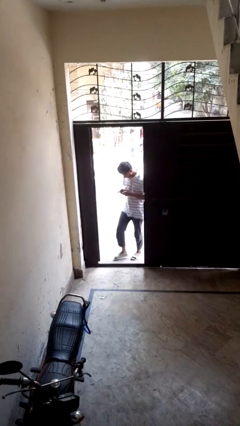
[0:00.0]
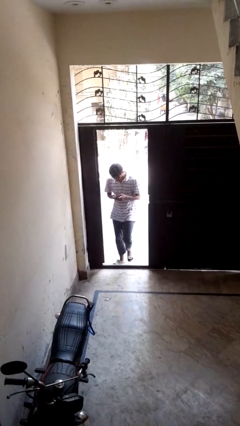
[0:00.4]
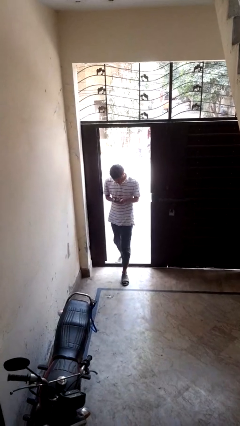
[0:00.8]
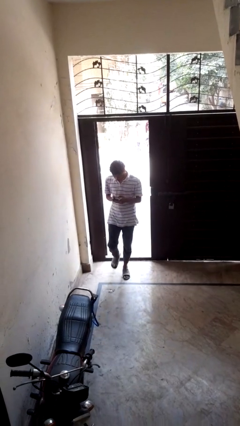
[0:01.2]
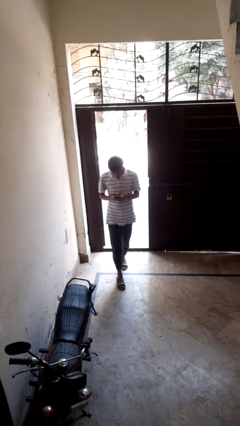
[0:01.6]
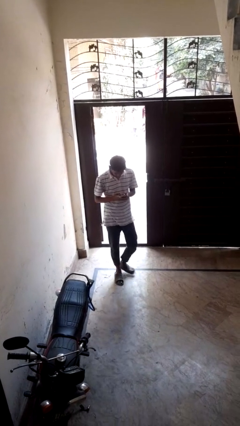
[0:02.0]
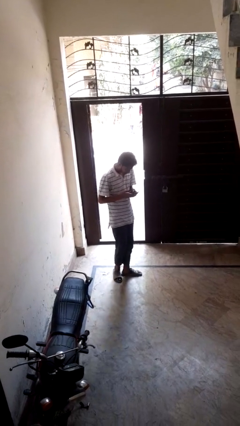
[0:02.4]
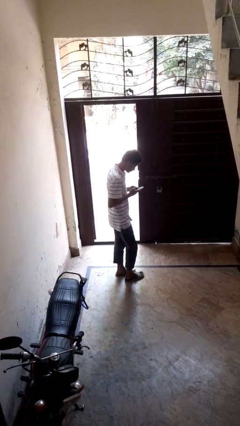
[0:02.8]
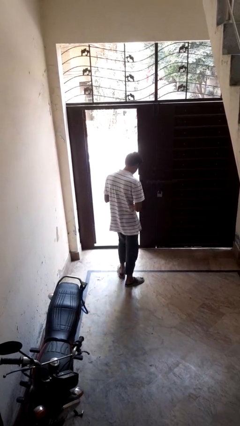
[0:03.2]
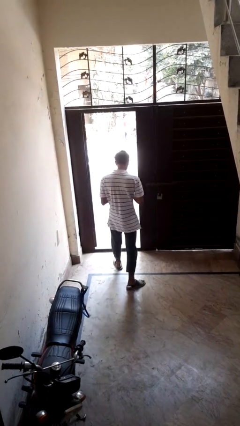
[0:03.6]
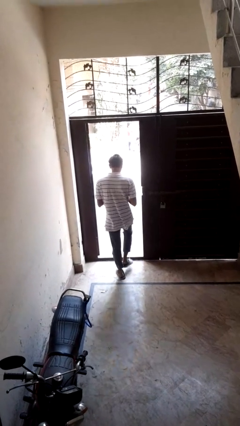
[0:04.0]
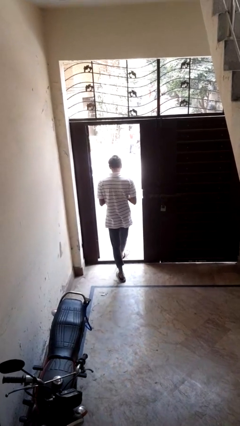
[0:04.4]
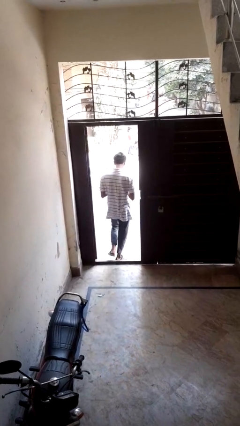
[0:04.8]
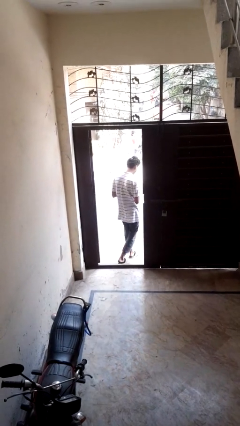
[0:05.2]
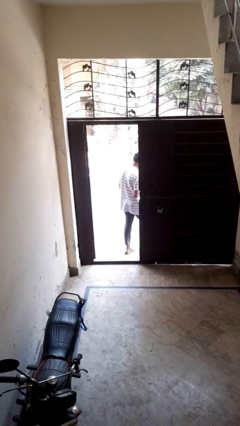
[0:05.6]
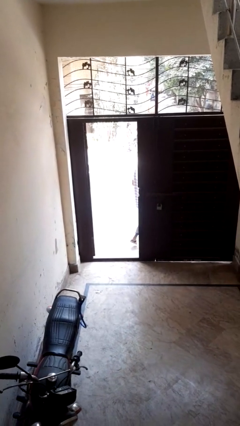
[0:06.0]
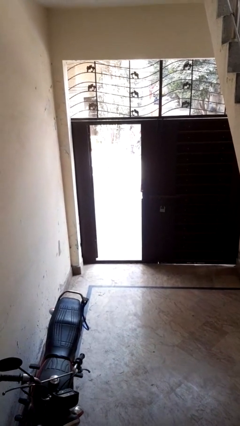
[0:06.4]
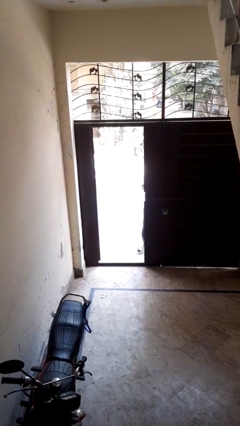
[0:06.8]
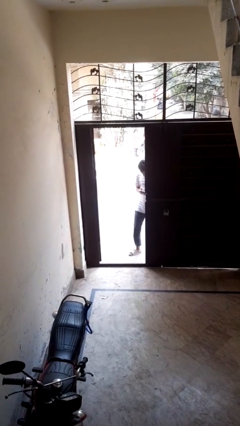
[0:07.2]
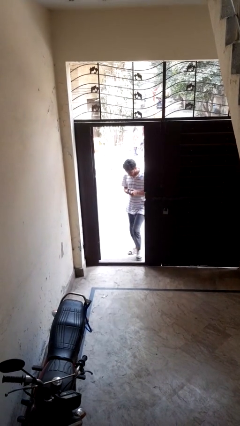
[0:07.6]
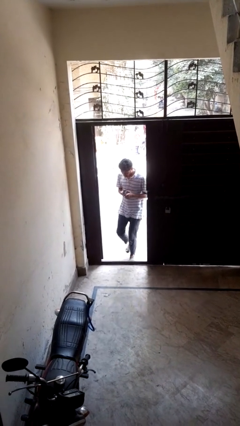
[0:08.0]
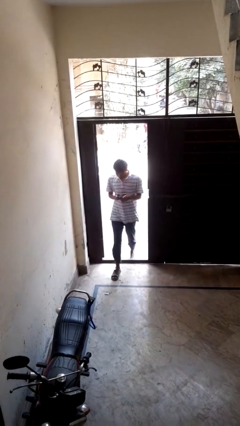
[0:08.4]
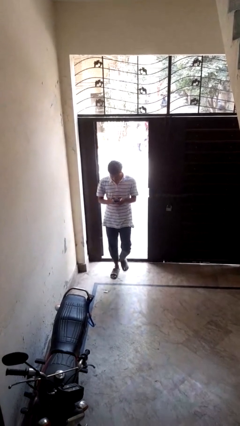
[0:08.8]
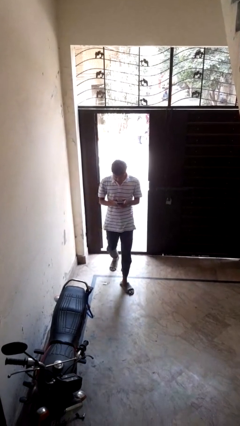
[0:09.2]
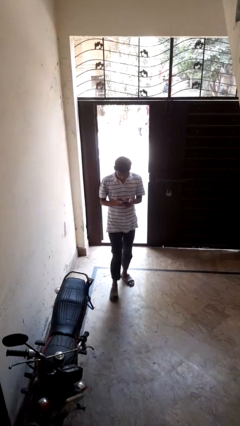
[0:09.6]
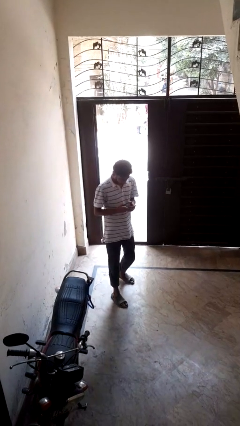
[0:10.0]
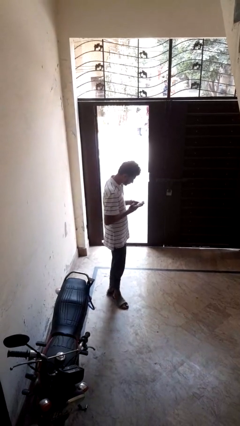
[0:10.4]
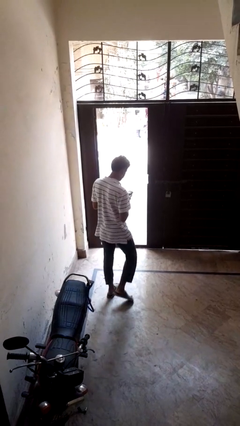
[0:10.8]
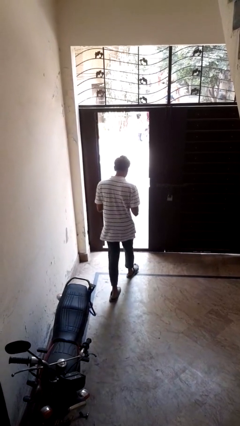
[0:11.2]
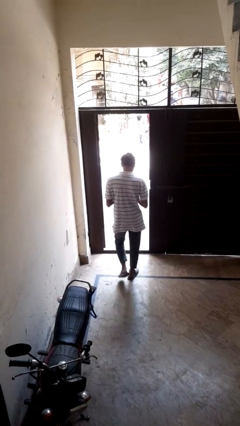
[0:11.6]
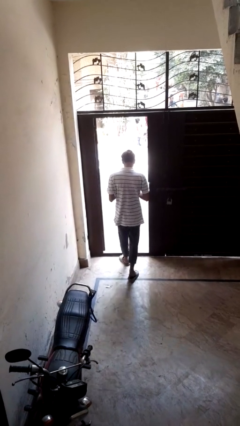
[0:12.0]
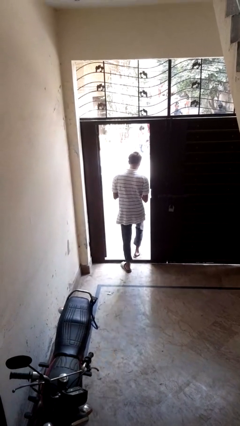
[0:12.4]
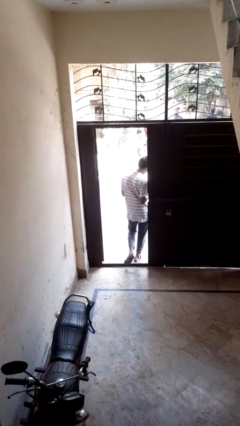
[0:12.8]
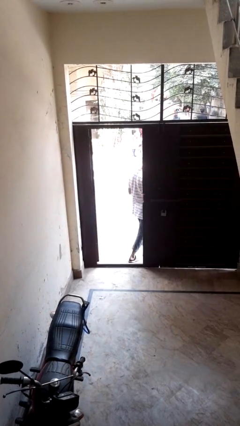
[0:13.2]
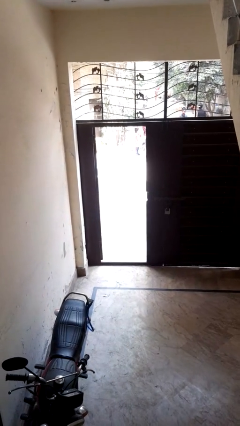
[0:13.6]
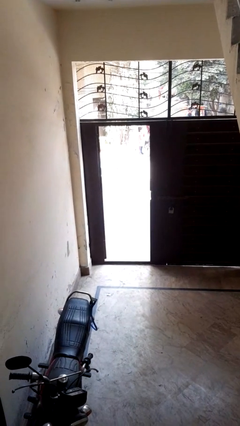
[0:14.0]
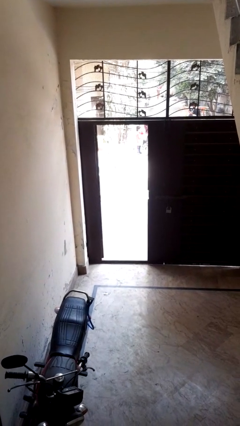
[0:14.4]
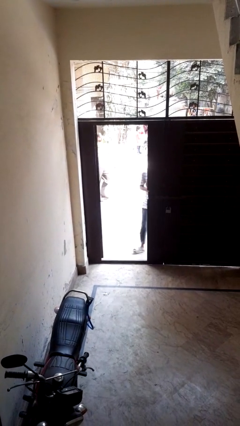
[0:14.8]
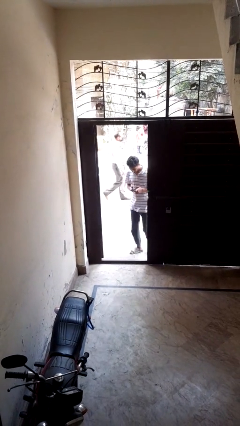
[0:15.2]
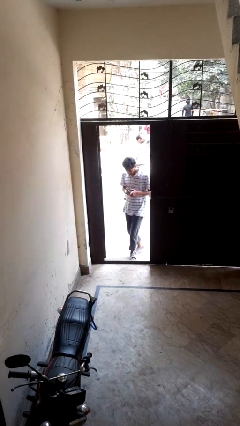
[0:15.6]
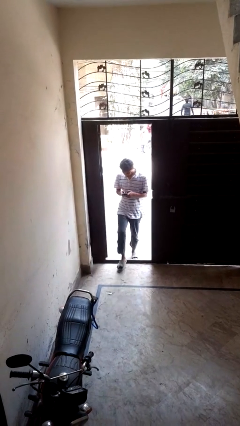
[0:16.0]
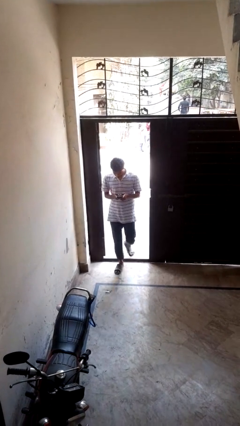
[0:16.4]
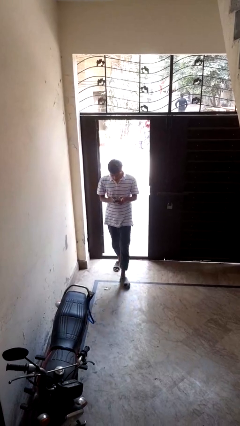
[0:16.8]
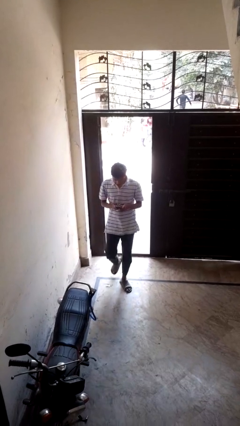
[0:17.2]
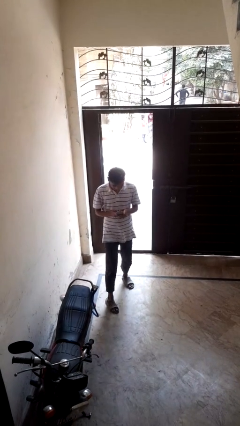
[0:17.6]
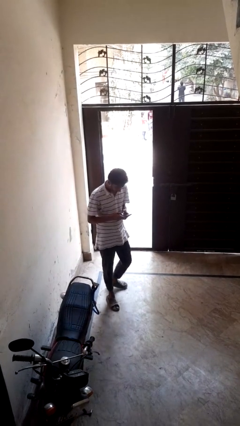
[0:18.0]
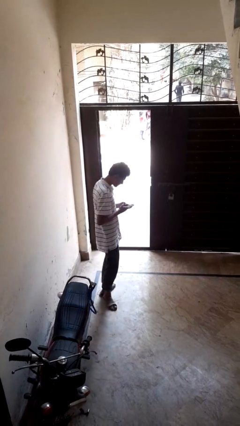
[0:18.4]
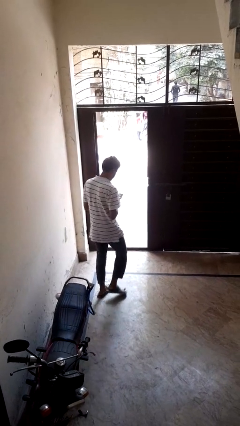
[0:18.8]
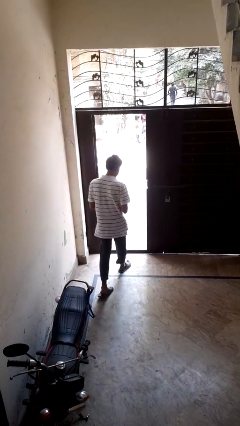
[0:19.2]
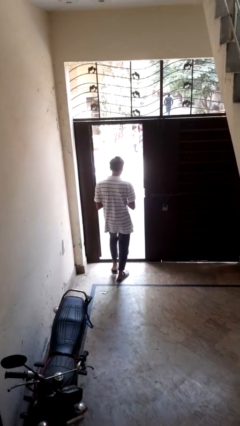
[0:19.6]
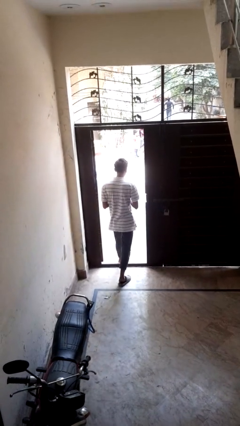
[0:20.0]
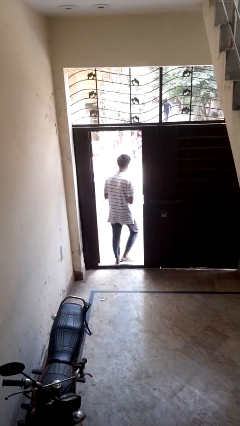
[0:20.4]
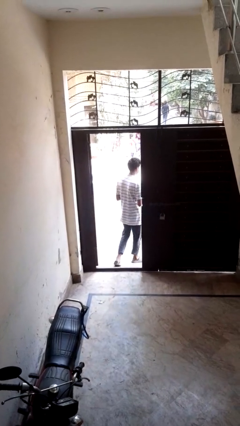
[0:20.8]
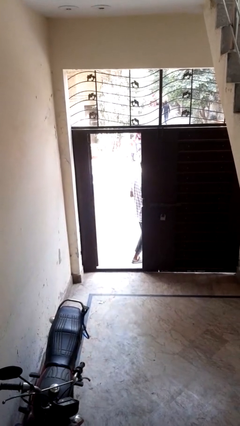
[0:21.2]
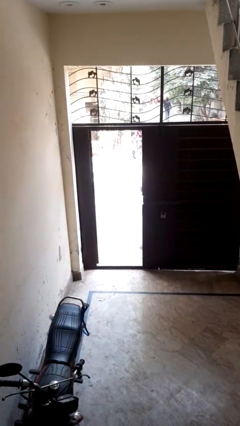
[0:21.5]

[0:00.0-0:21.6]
person texts on phone

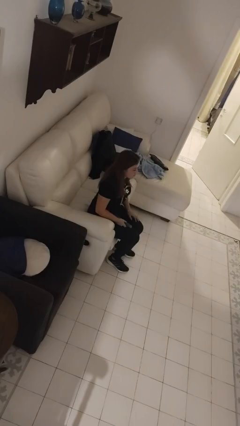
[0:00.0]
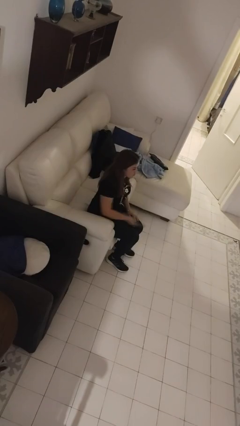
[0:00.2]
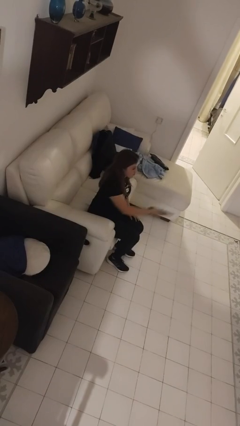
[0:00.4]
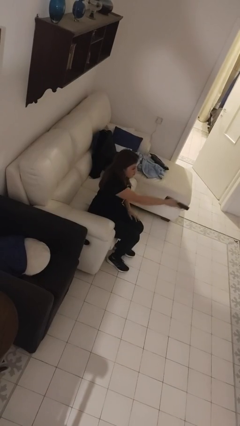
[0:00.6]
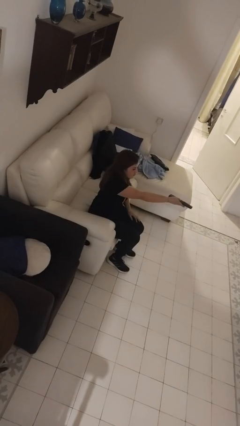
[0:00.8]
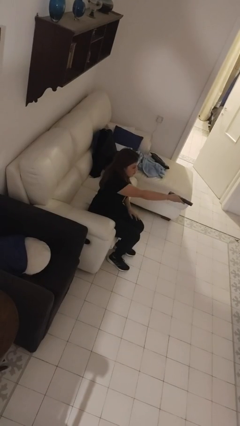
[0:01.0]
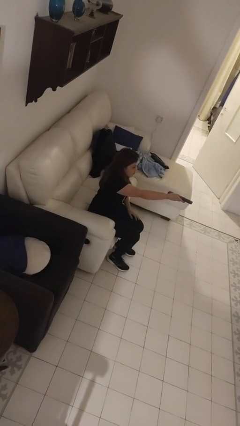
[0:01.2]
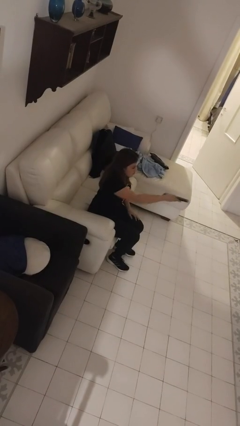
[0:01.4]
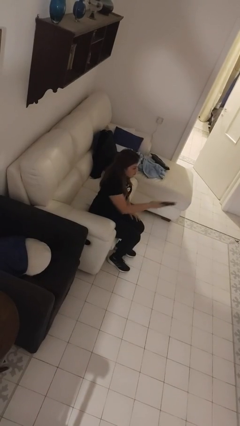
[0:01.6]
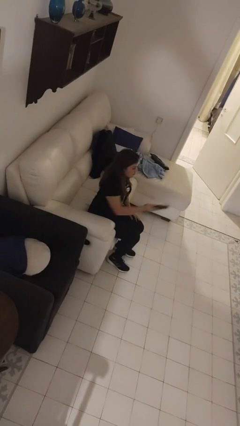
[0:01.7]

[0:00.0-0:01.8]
person uses television remote

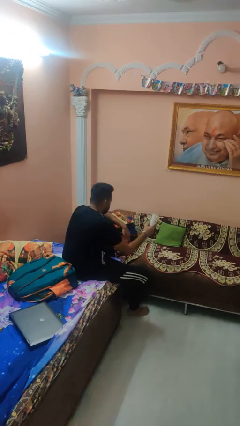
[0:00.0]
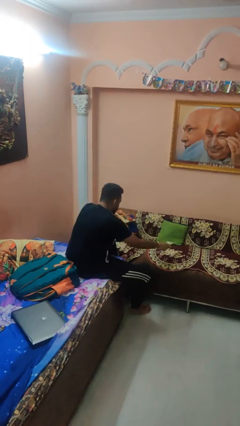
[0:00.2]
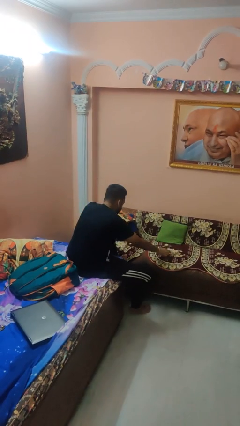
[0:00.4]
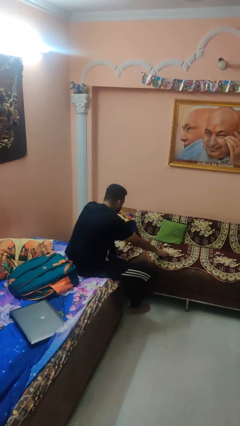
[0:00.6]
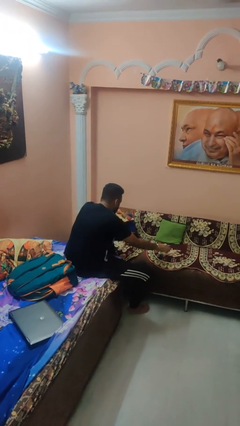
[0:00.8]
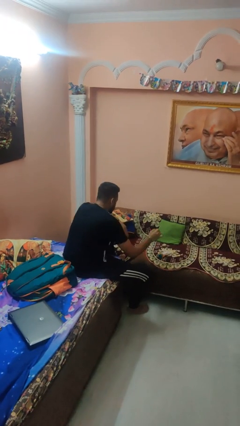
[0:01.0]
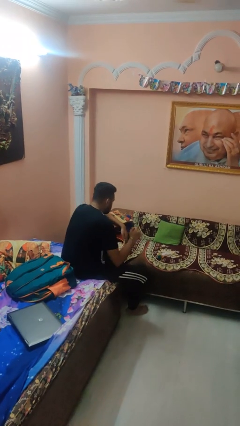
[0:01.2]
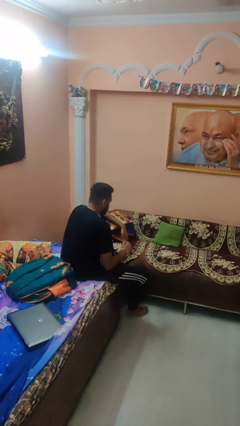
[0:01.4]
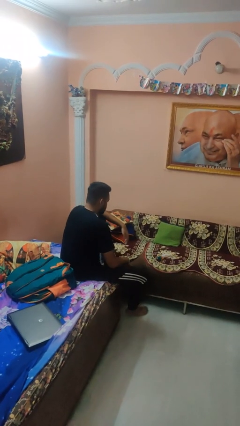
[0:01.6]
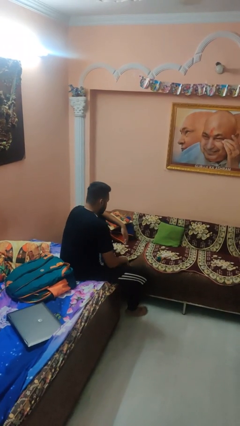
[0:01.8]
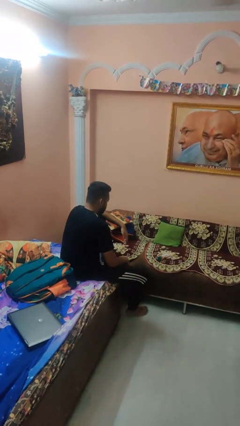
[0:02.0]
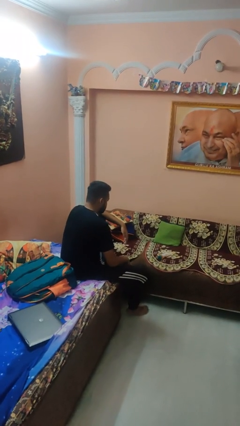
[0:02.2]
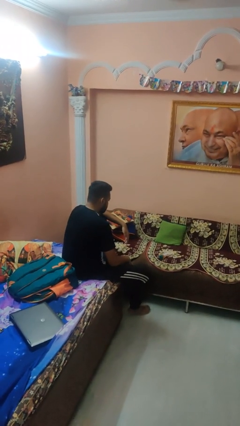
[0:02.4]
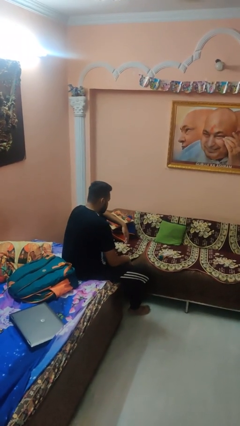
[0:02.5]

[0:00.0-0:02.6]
person puts down object on couch

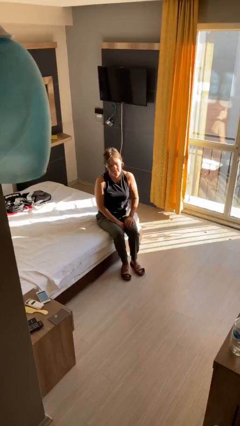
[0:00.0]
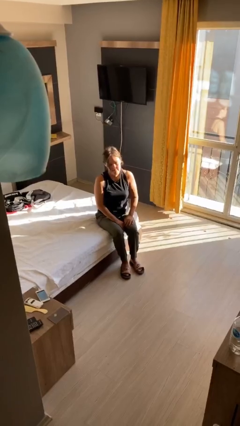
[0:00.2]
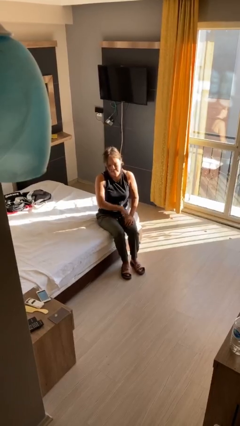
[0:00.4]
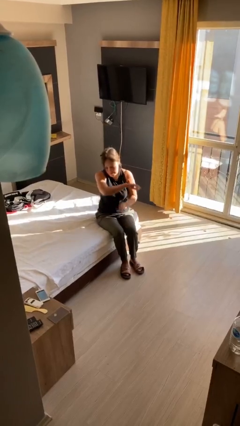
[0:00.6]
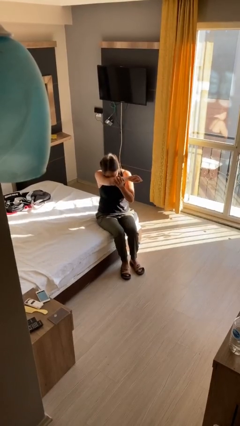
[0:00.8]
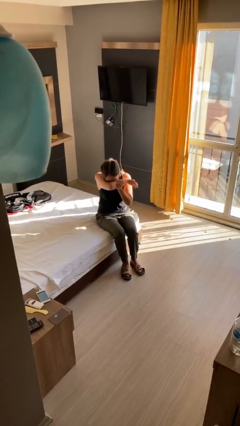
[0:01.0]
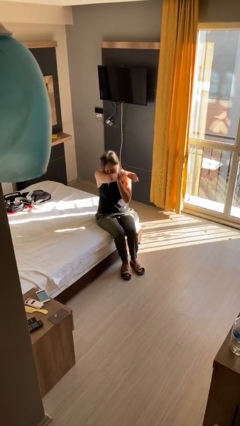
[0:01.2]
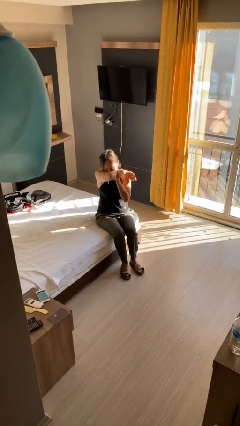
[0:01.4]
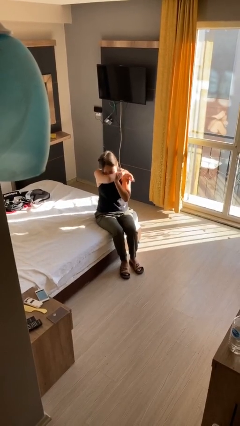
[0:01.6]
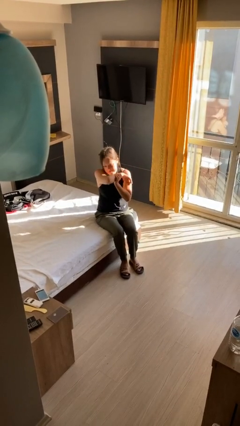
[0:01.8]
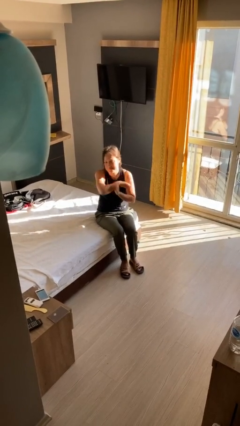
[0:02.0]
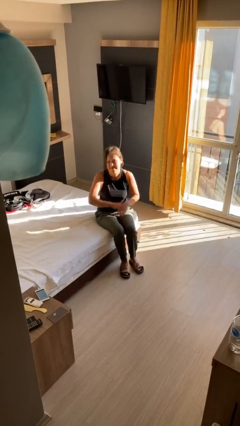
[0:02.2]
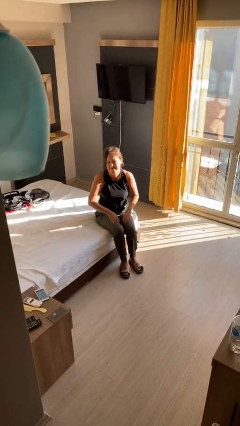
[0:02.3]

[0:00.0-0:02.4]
person sneezes into hand
